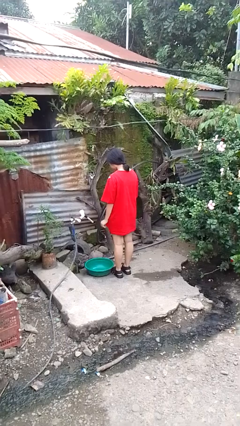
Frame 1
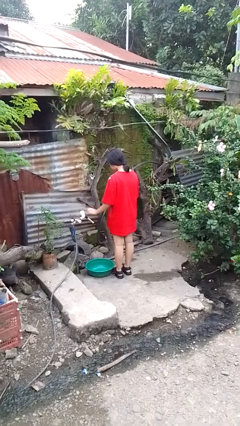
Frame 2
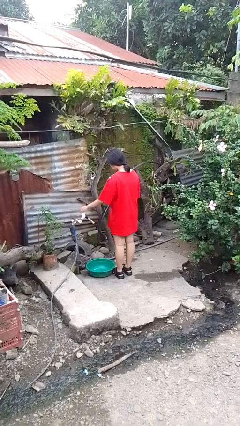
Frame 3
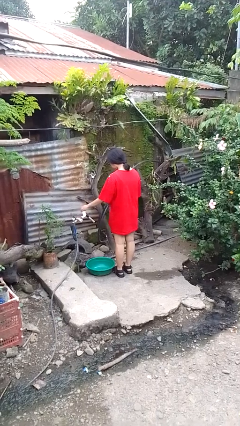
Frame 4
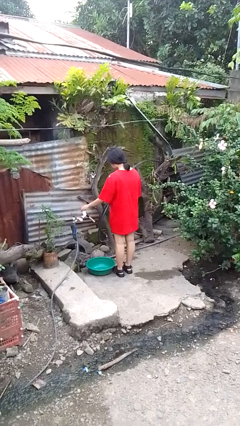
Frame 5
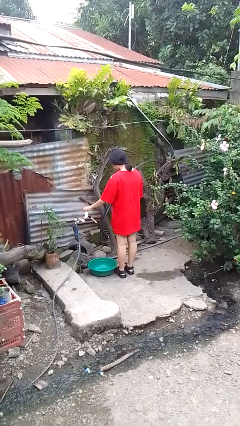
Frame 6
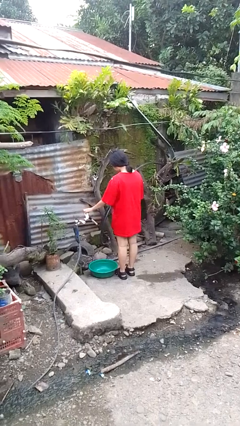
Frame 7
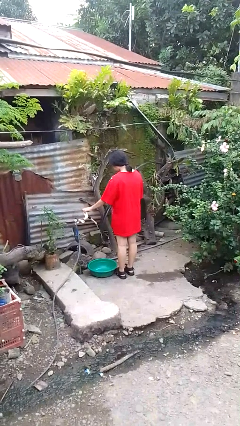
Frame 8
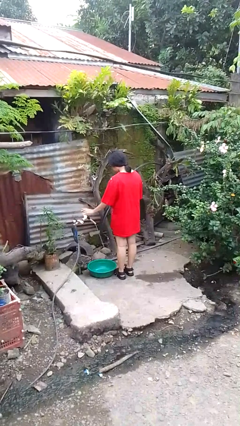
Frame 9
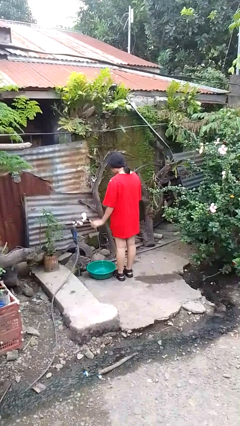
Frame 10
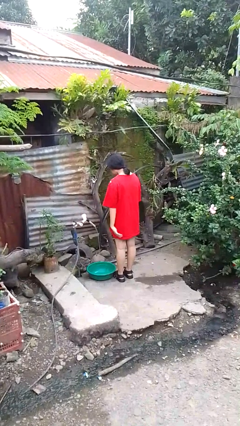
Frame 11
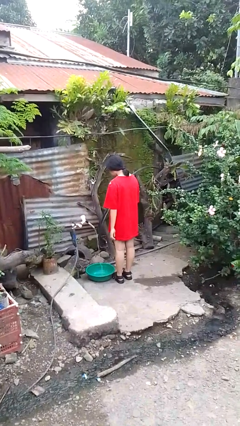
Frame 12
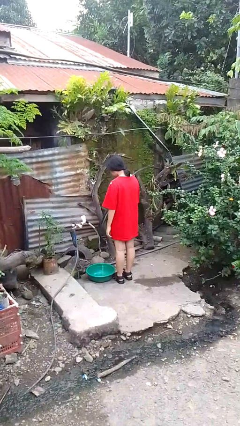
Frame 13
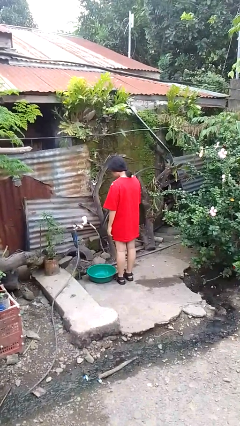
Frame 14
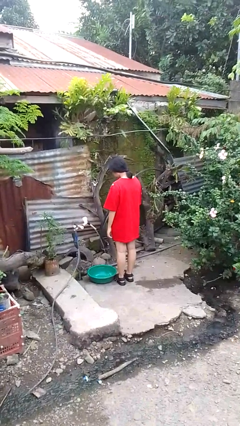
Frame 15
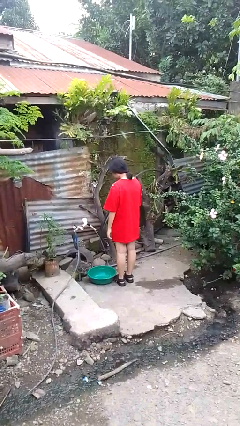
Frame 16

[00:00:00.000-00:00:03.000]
person turns on faucet

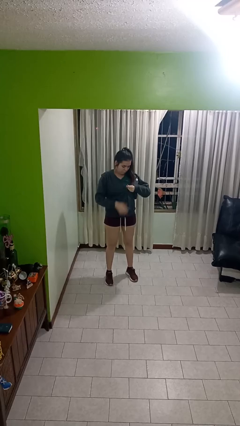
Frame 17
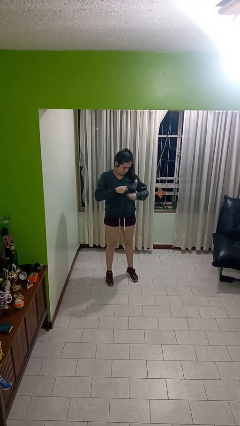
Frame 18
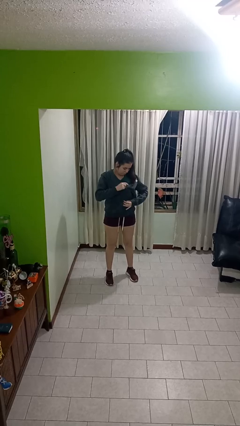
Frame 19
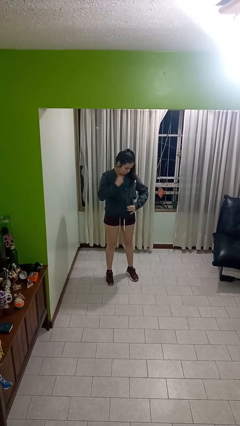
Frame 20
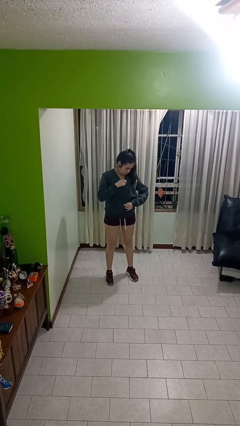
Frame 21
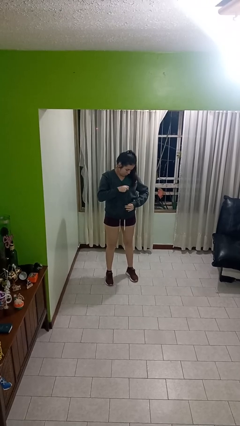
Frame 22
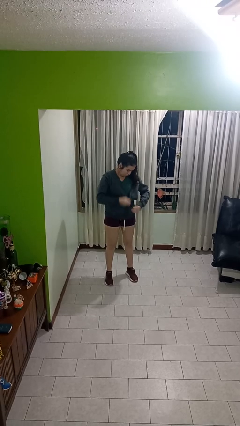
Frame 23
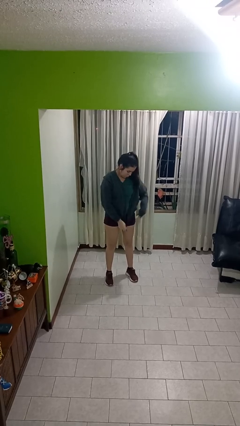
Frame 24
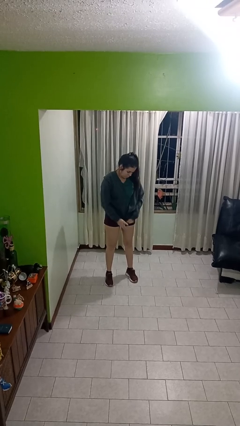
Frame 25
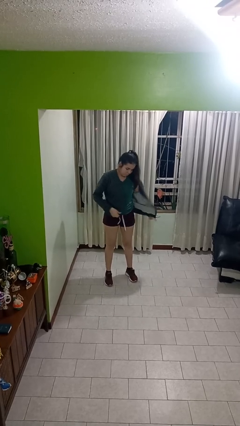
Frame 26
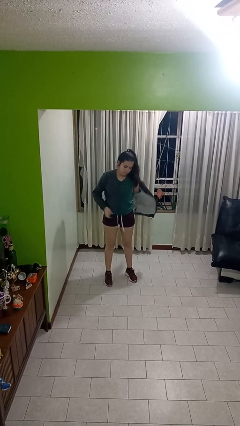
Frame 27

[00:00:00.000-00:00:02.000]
person unzips jacket

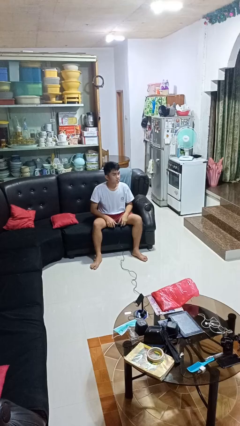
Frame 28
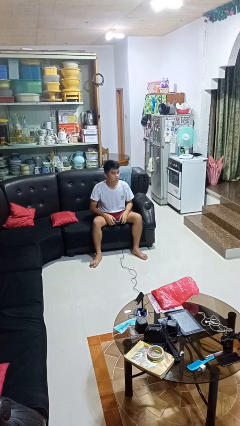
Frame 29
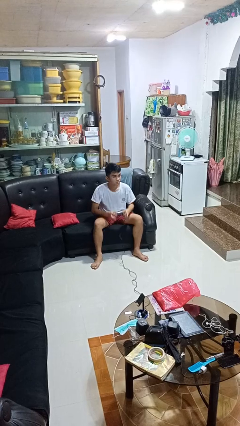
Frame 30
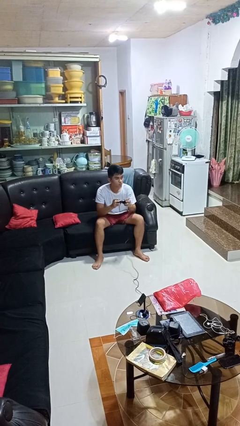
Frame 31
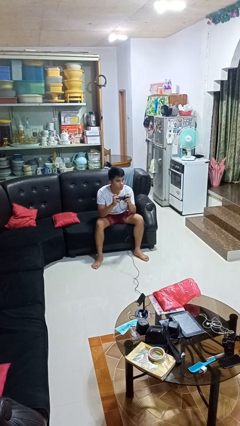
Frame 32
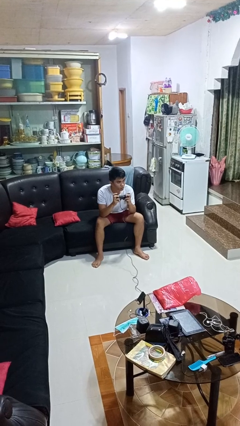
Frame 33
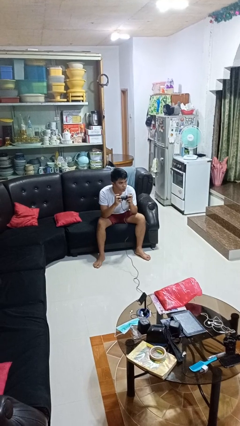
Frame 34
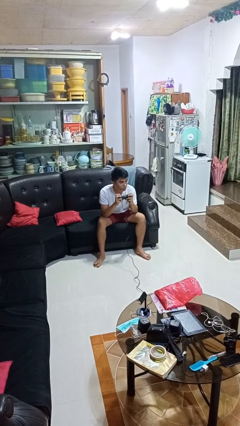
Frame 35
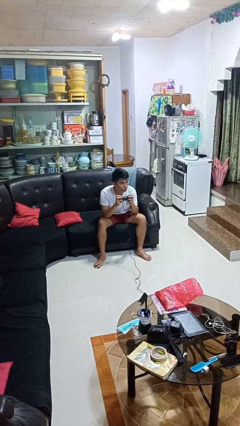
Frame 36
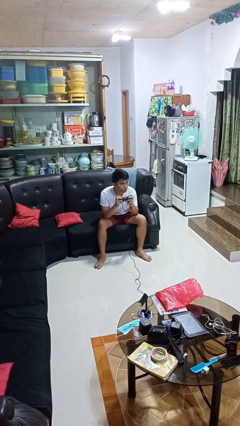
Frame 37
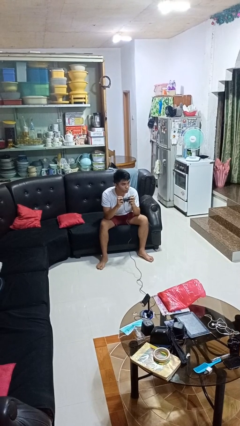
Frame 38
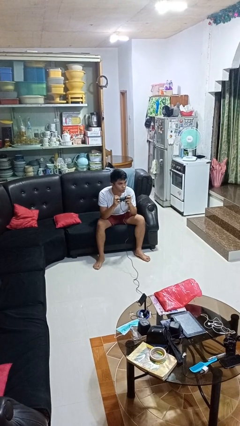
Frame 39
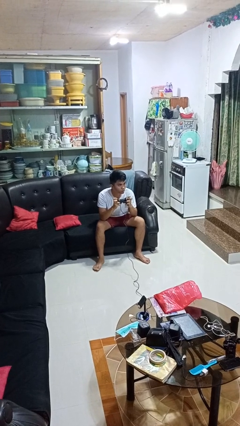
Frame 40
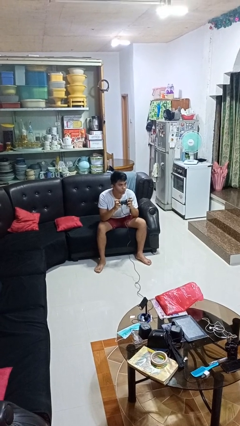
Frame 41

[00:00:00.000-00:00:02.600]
person interacts with handheld game

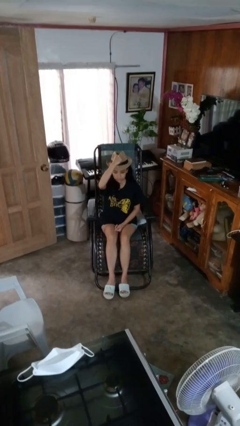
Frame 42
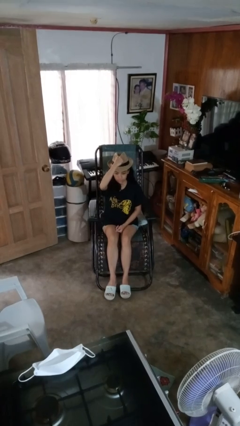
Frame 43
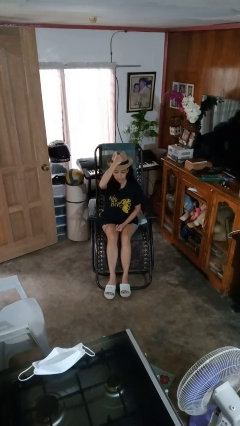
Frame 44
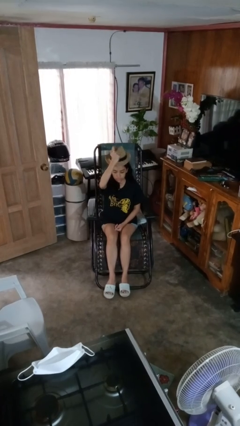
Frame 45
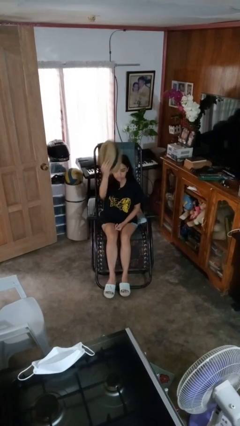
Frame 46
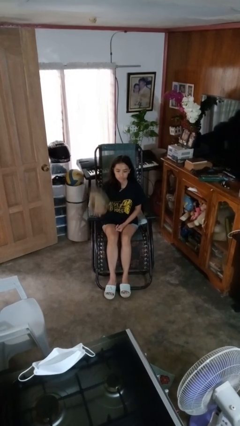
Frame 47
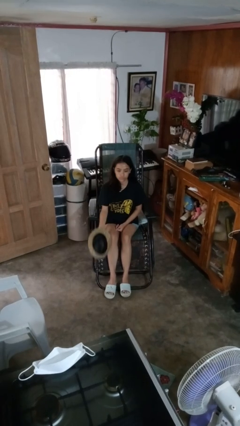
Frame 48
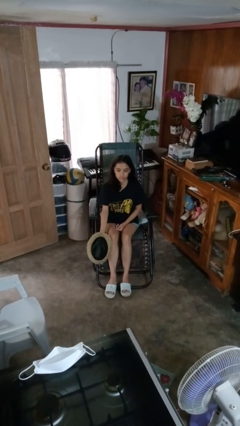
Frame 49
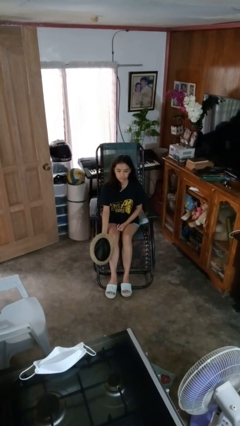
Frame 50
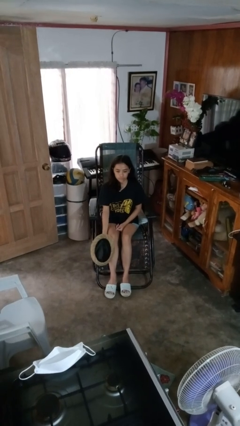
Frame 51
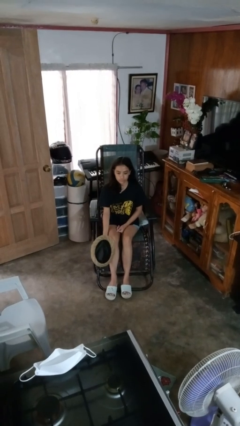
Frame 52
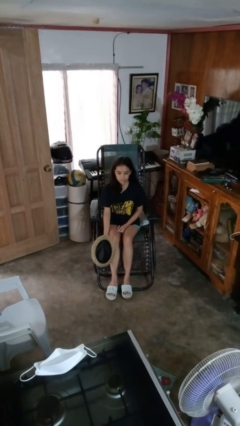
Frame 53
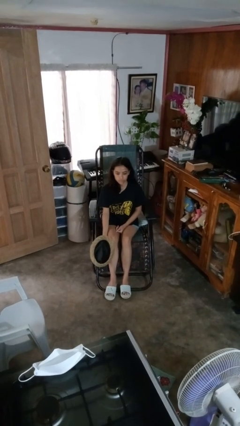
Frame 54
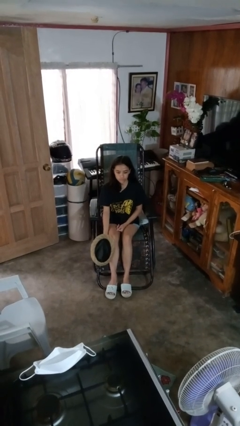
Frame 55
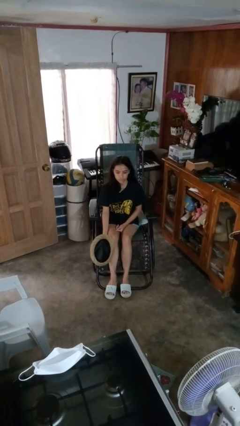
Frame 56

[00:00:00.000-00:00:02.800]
person takes off hat

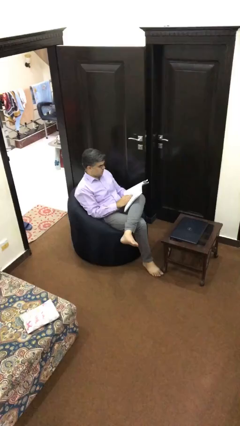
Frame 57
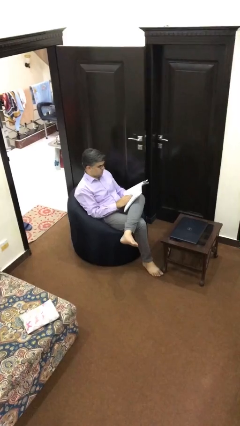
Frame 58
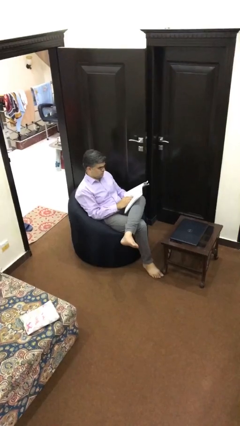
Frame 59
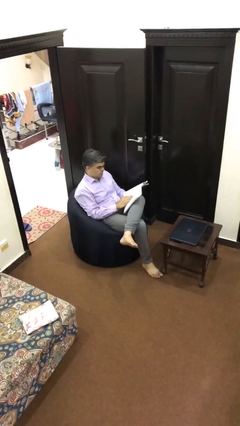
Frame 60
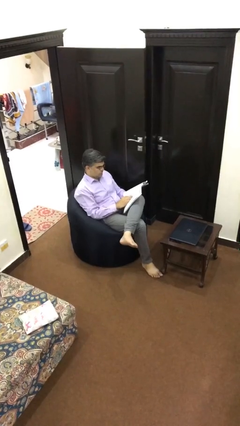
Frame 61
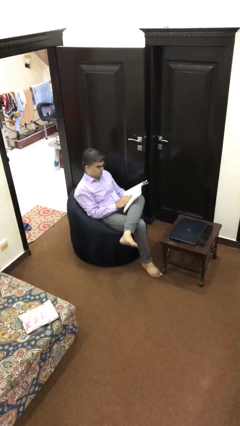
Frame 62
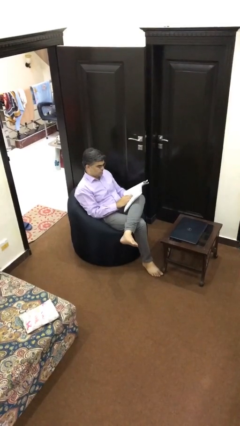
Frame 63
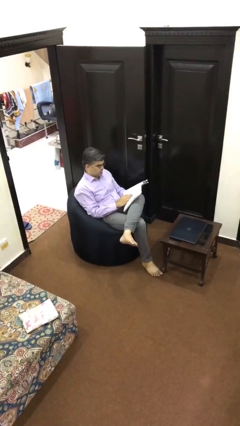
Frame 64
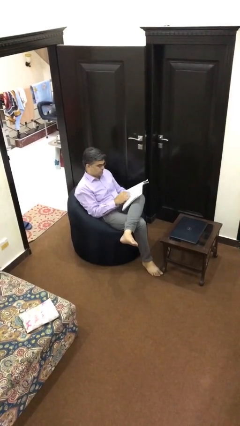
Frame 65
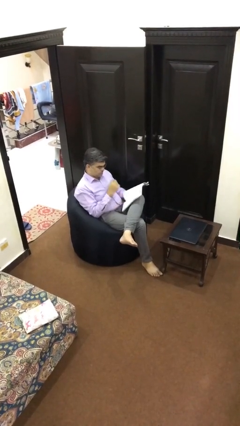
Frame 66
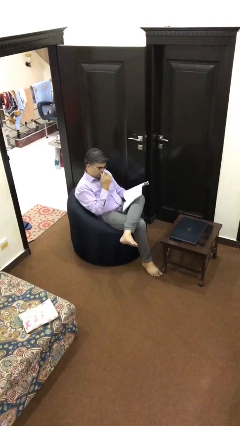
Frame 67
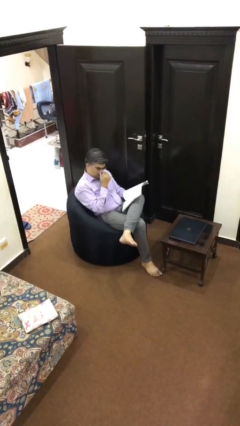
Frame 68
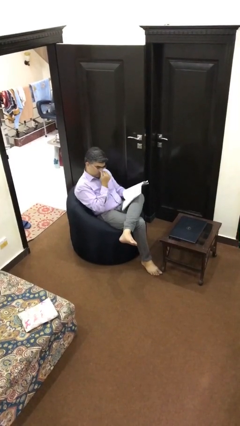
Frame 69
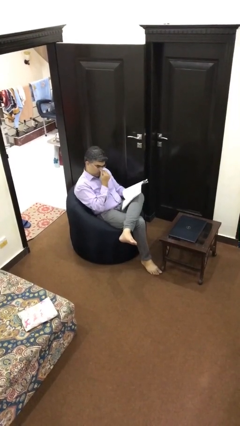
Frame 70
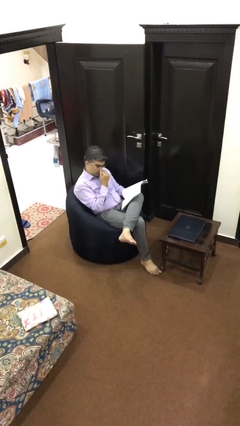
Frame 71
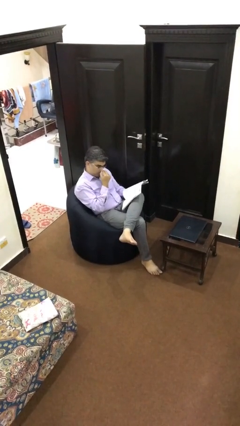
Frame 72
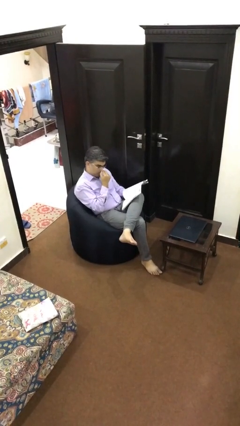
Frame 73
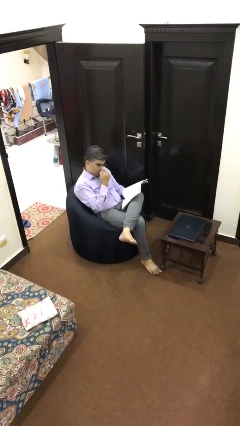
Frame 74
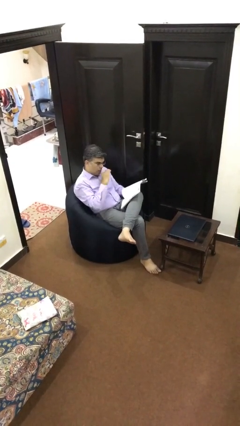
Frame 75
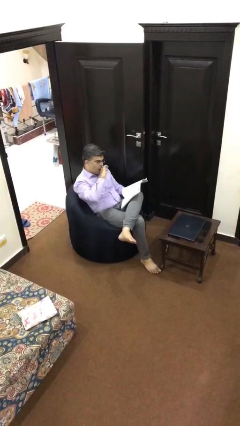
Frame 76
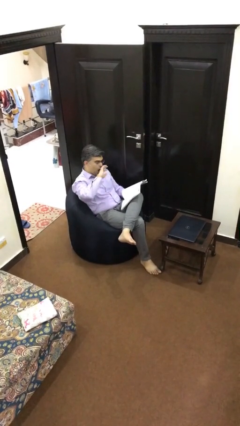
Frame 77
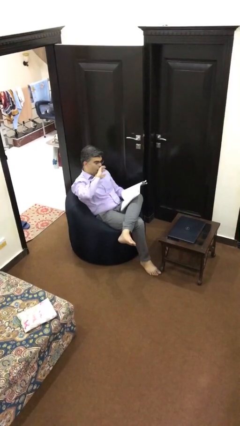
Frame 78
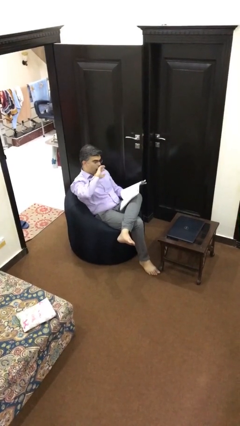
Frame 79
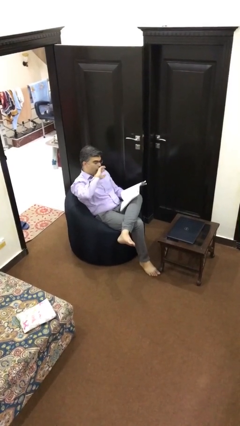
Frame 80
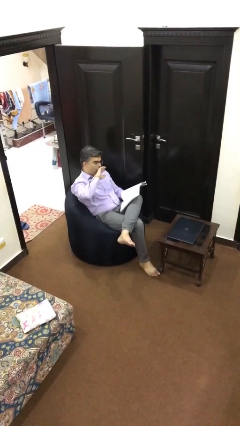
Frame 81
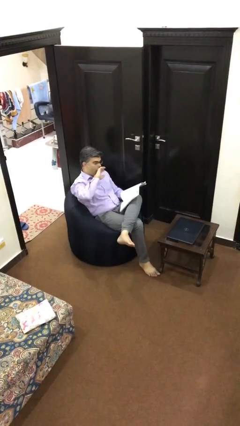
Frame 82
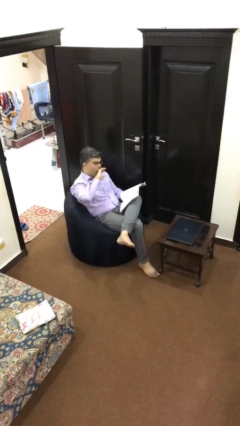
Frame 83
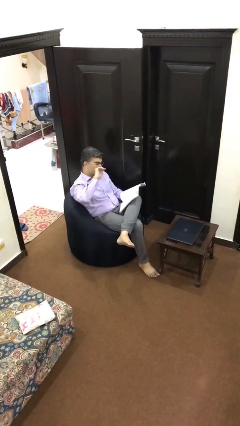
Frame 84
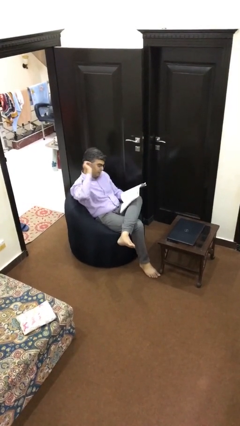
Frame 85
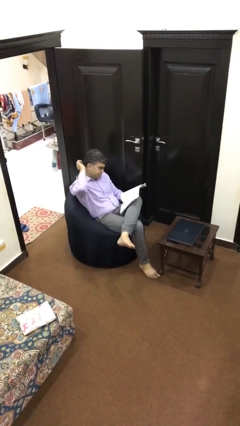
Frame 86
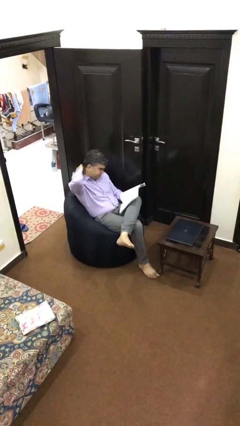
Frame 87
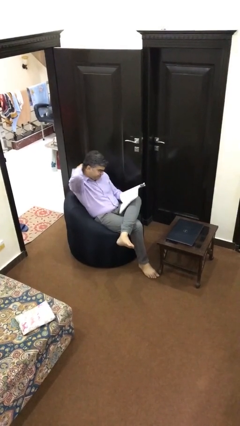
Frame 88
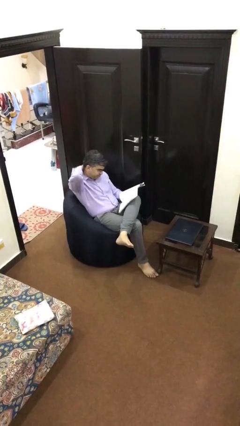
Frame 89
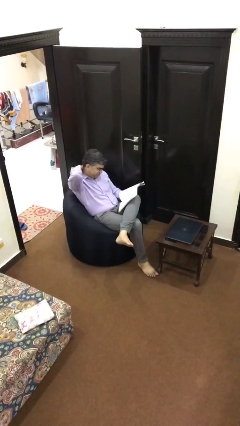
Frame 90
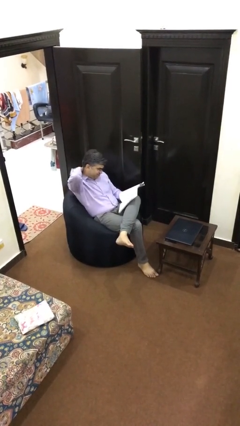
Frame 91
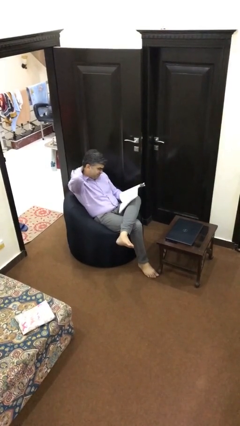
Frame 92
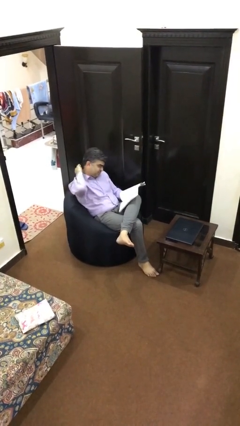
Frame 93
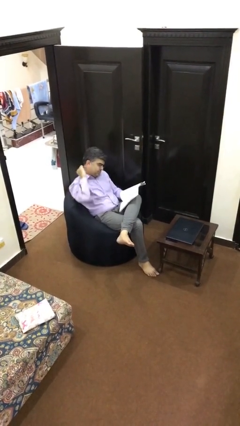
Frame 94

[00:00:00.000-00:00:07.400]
person reads document
